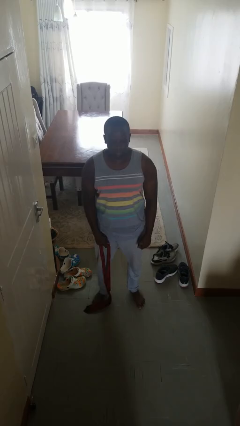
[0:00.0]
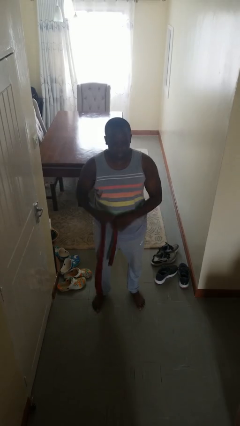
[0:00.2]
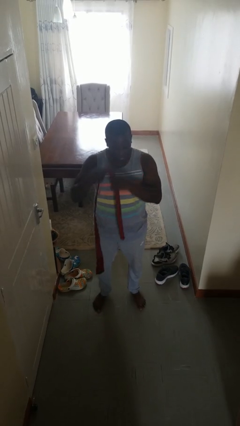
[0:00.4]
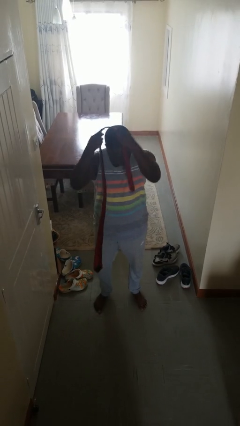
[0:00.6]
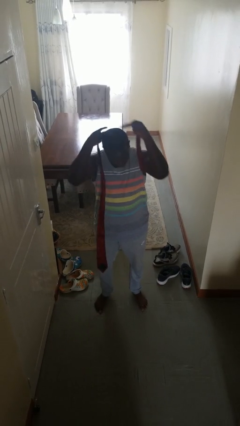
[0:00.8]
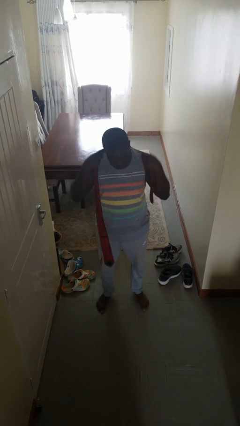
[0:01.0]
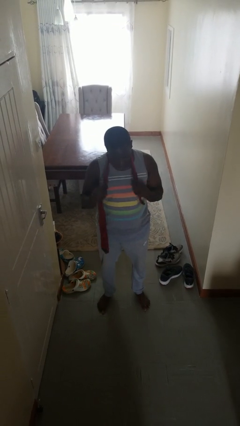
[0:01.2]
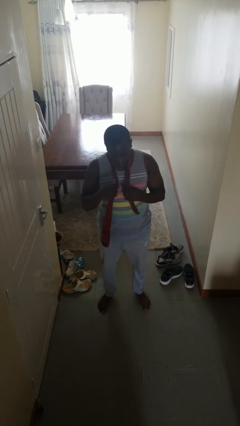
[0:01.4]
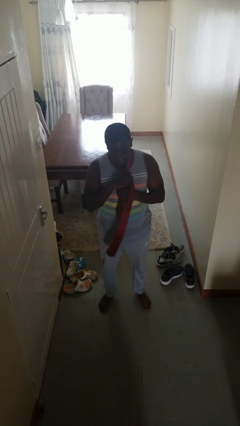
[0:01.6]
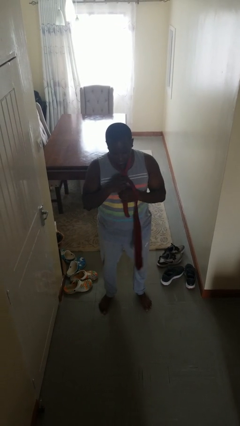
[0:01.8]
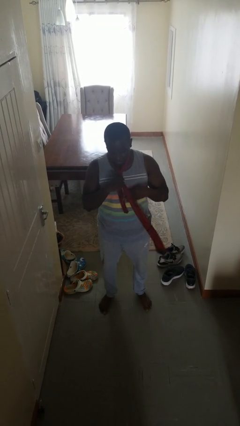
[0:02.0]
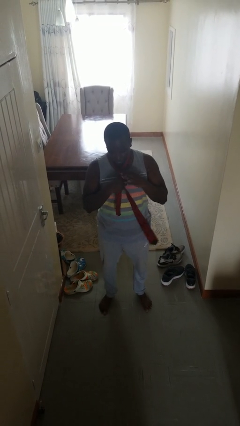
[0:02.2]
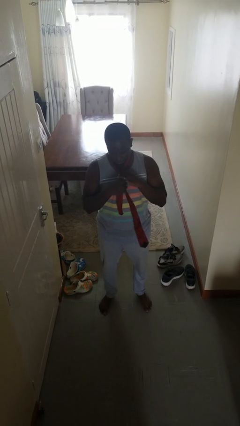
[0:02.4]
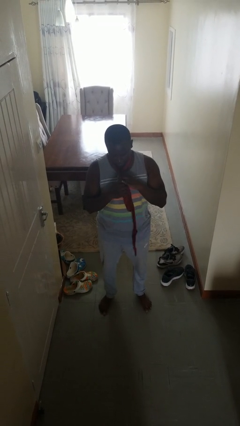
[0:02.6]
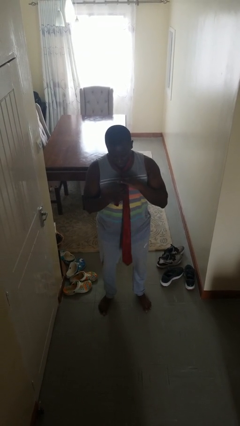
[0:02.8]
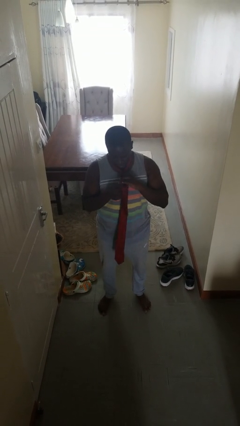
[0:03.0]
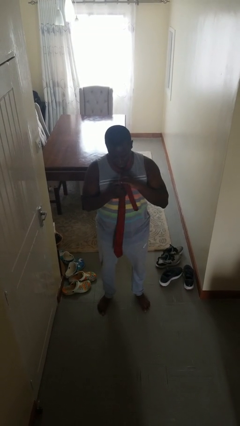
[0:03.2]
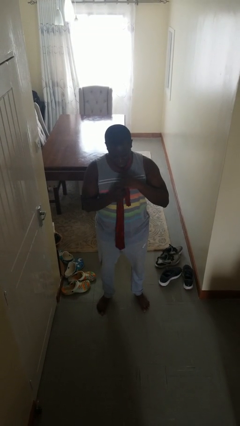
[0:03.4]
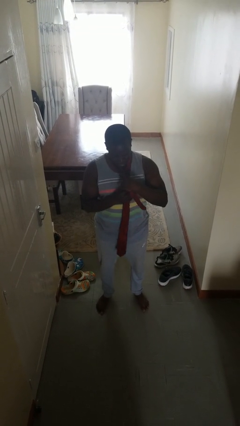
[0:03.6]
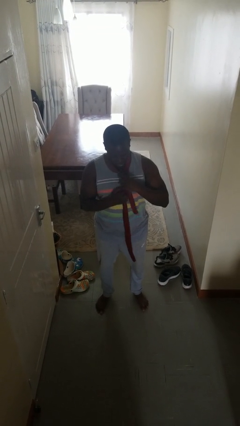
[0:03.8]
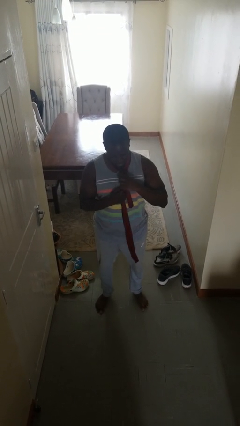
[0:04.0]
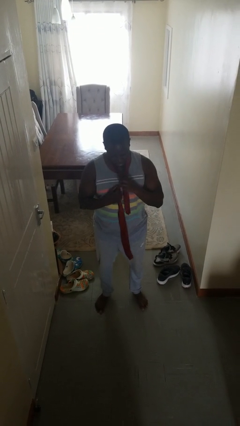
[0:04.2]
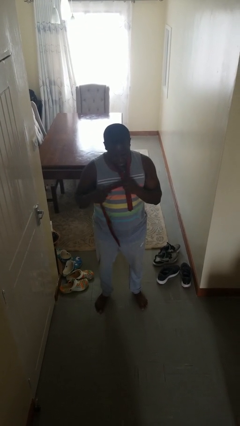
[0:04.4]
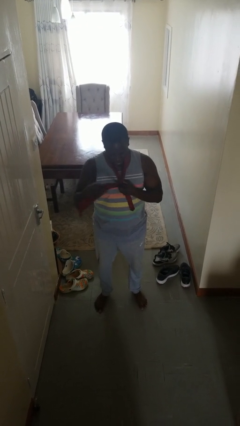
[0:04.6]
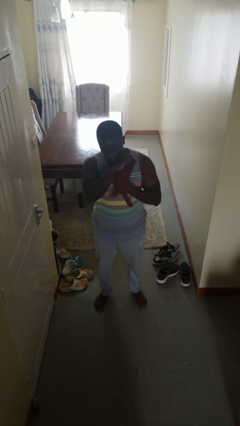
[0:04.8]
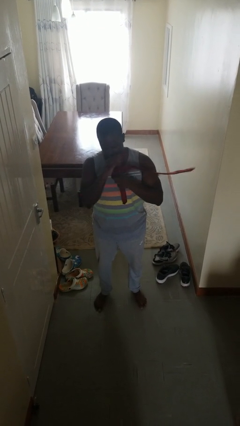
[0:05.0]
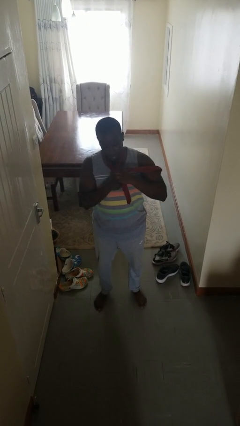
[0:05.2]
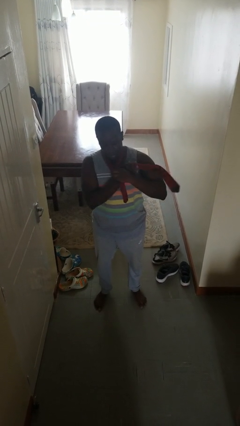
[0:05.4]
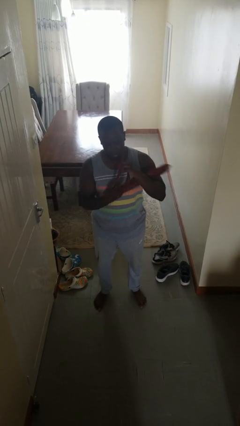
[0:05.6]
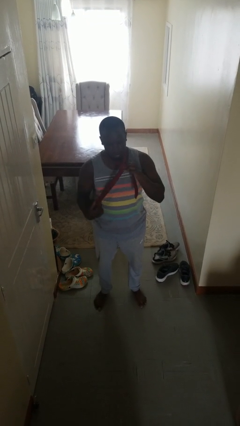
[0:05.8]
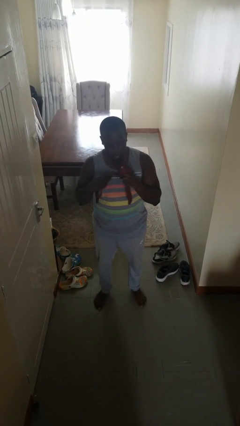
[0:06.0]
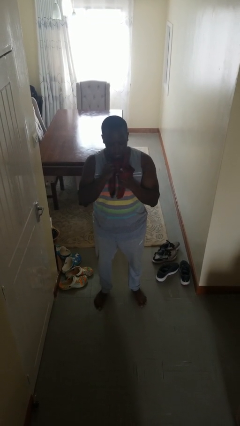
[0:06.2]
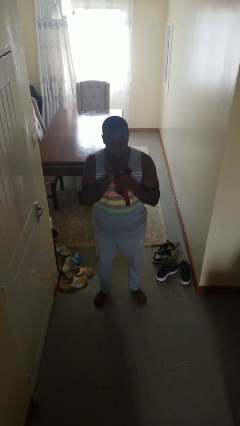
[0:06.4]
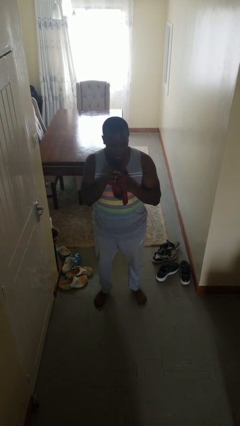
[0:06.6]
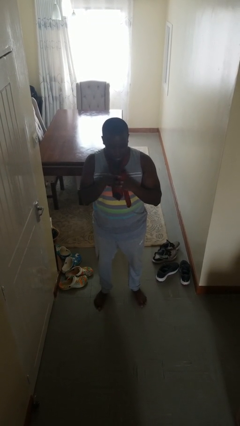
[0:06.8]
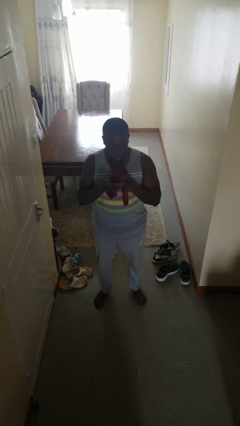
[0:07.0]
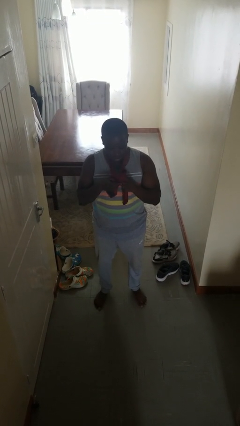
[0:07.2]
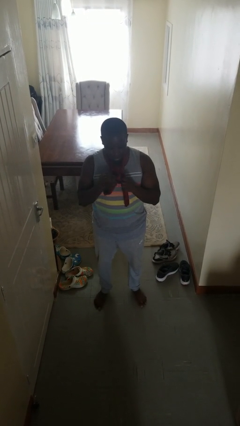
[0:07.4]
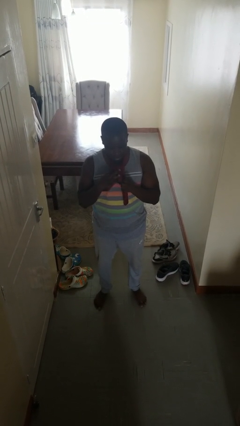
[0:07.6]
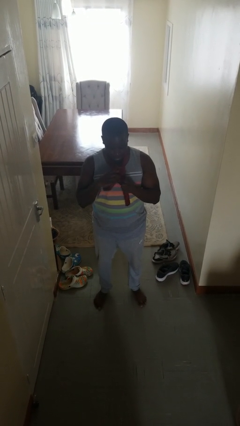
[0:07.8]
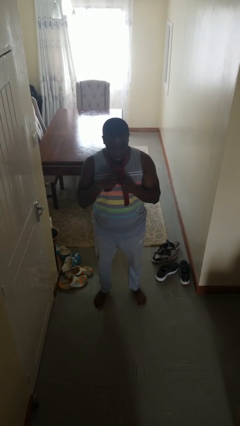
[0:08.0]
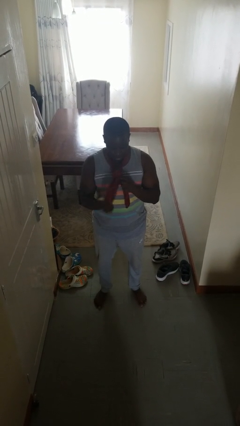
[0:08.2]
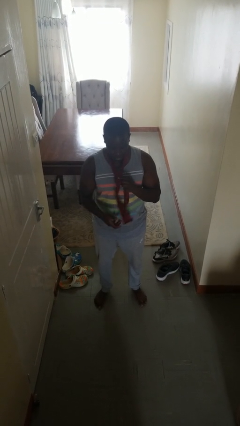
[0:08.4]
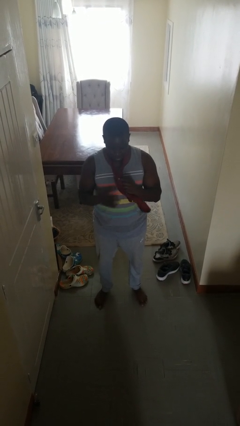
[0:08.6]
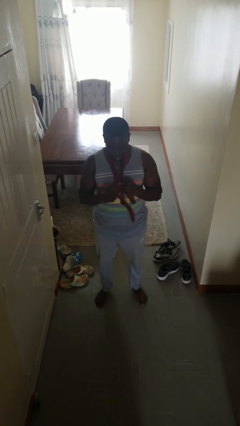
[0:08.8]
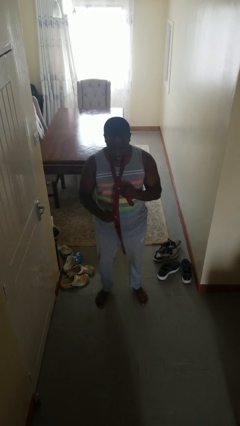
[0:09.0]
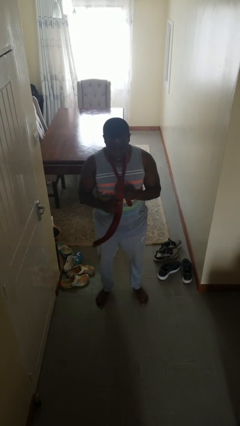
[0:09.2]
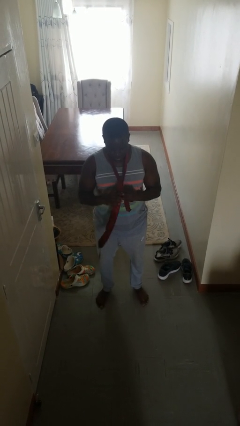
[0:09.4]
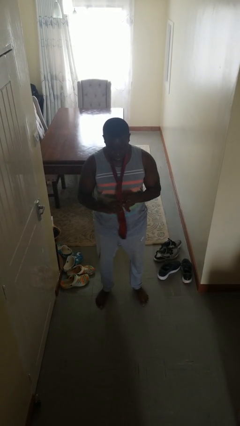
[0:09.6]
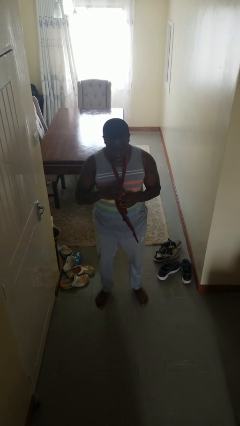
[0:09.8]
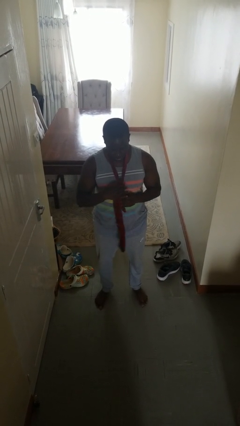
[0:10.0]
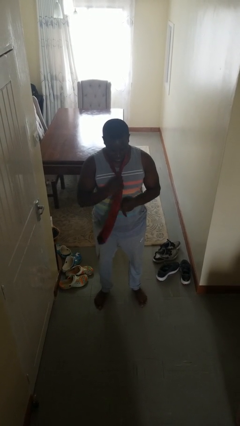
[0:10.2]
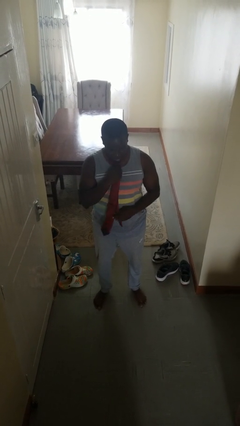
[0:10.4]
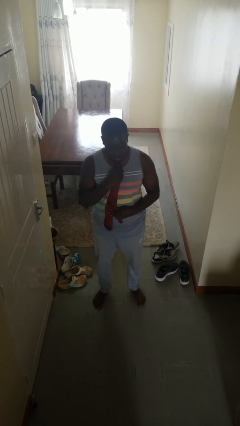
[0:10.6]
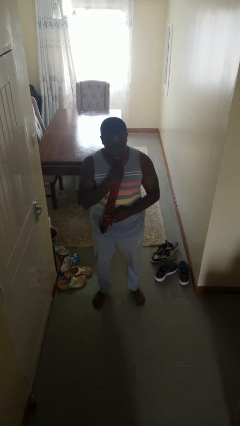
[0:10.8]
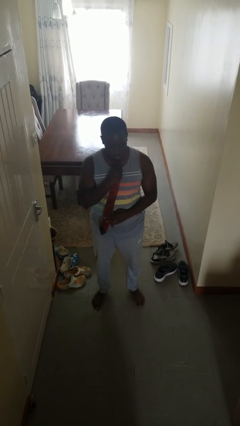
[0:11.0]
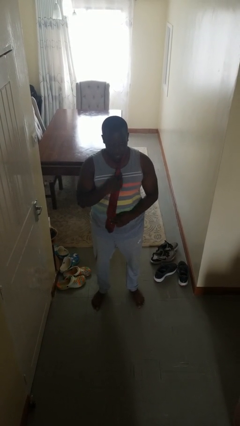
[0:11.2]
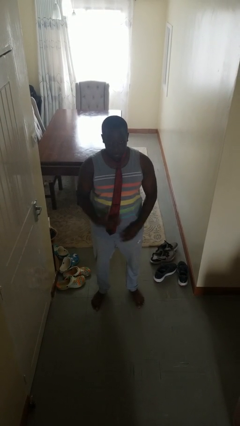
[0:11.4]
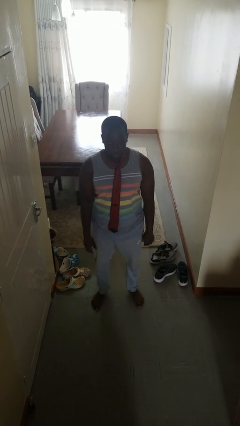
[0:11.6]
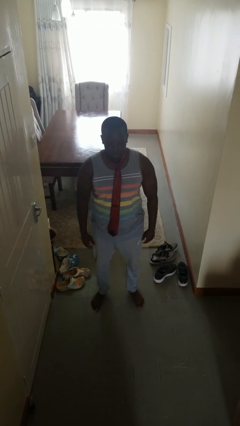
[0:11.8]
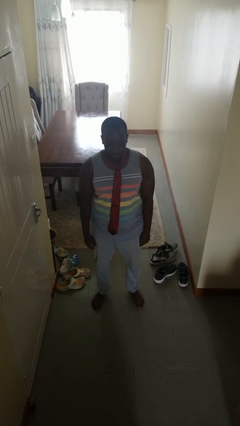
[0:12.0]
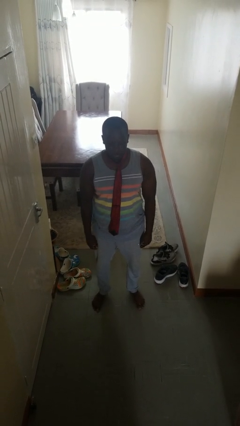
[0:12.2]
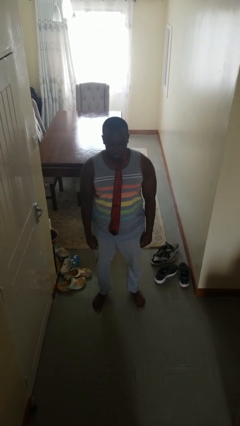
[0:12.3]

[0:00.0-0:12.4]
person puts on necktie

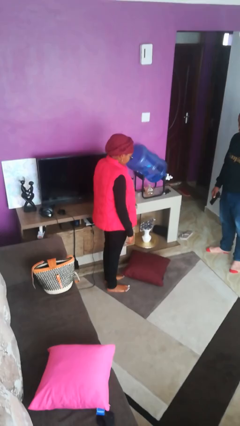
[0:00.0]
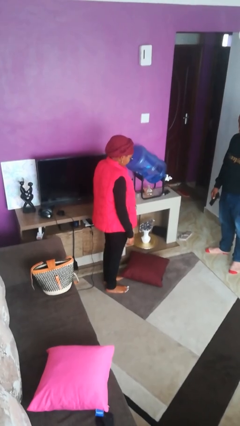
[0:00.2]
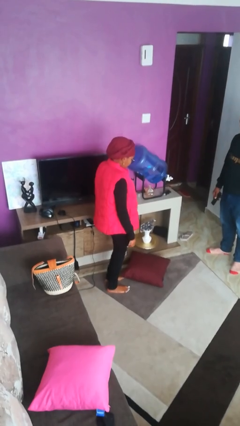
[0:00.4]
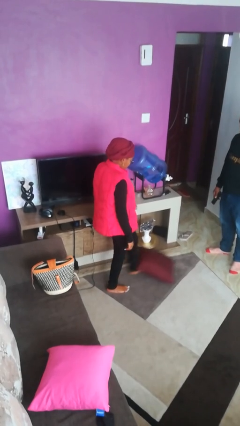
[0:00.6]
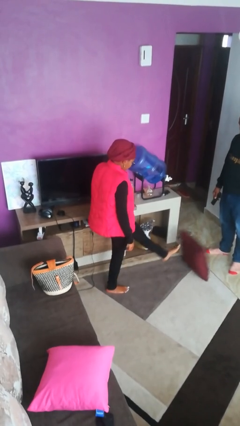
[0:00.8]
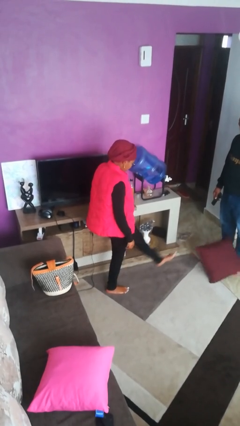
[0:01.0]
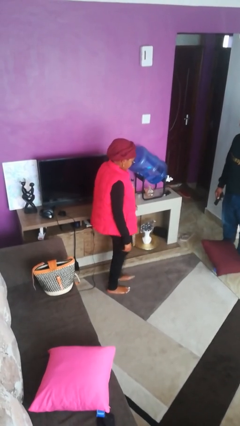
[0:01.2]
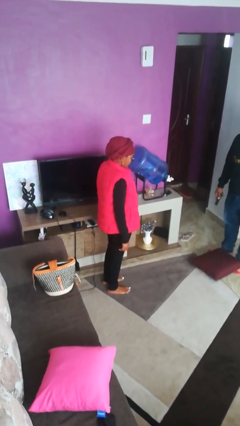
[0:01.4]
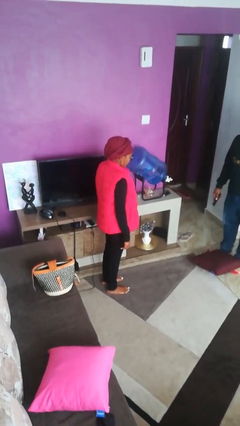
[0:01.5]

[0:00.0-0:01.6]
person kicks object to person

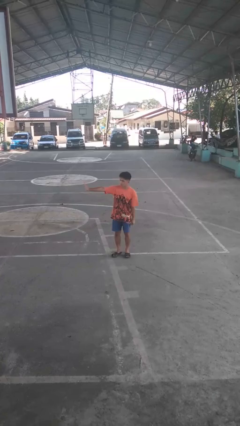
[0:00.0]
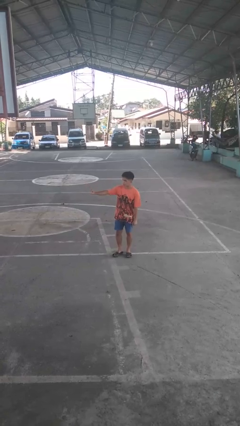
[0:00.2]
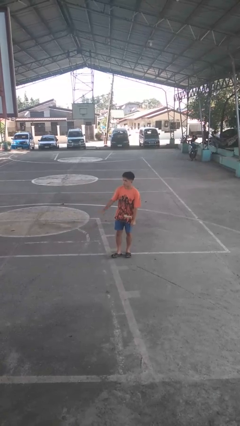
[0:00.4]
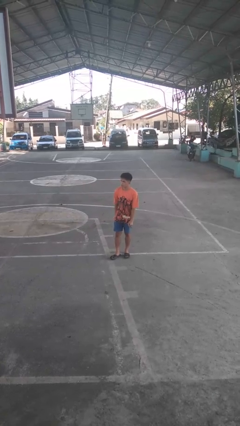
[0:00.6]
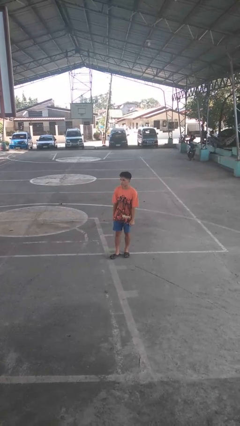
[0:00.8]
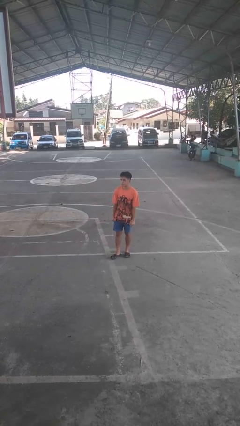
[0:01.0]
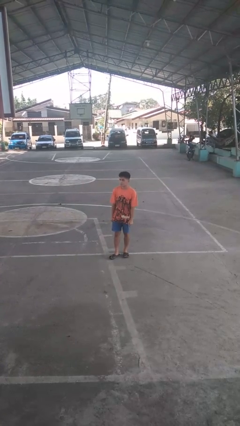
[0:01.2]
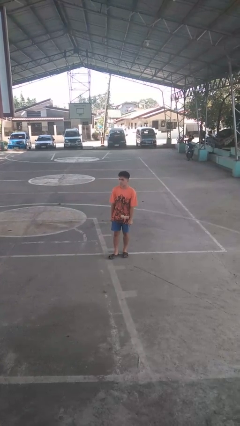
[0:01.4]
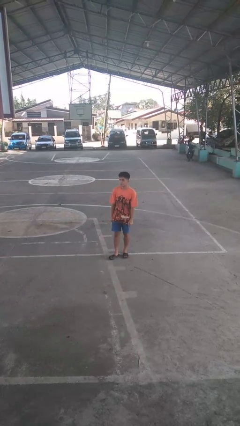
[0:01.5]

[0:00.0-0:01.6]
person gestures swipe right

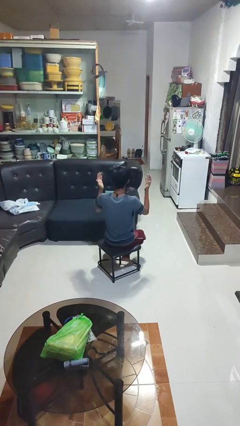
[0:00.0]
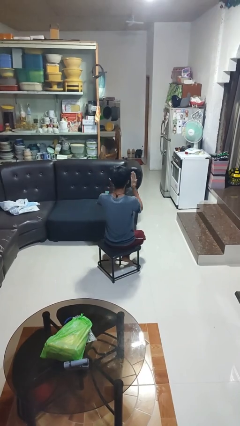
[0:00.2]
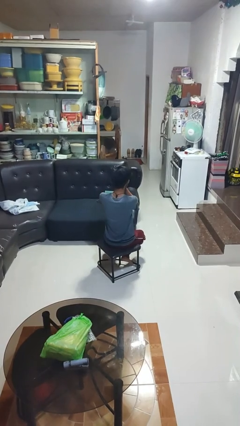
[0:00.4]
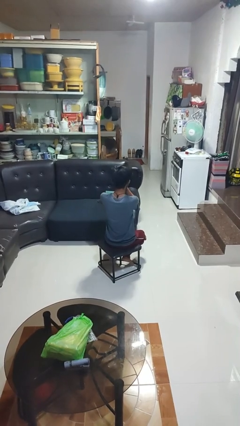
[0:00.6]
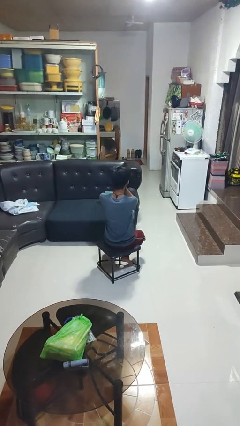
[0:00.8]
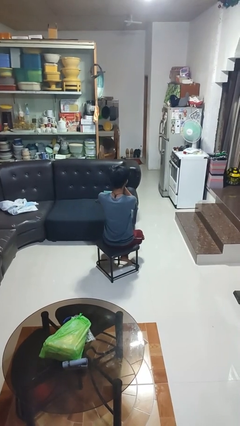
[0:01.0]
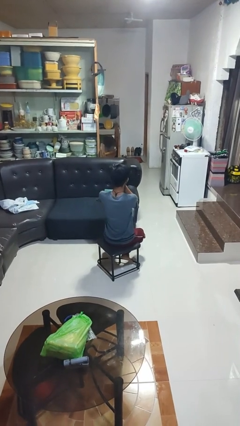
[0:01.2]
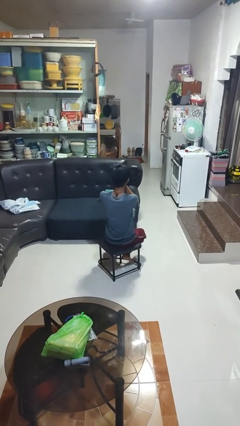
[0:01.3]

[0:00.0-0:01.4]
person covers face with hands

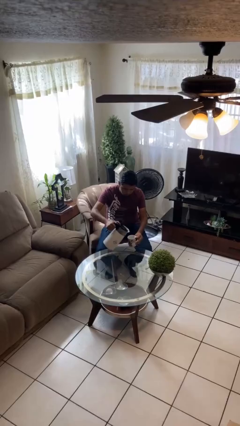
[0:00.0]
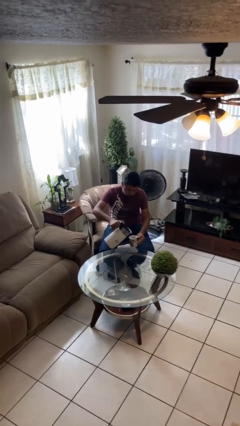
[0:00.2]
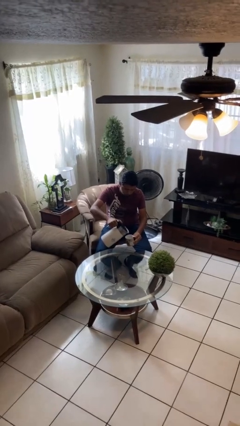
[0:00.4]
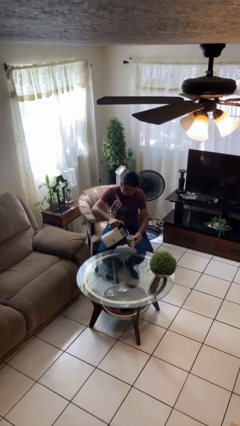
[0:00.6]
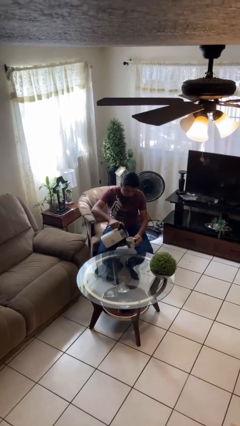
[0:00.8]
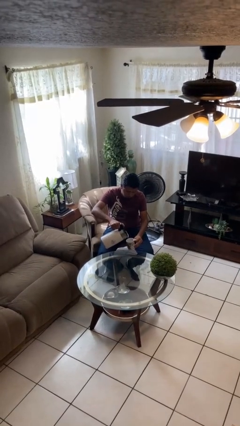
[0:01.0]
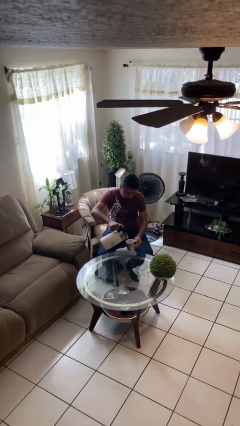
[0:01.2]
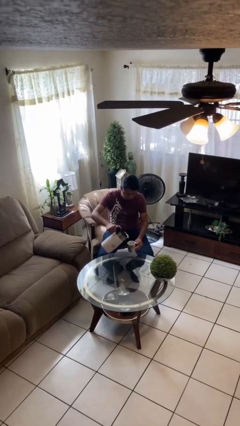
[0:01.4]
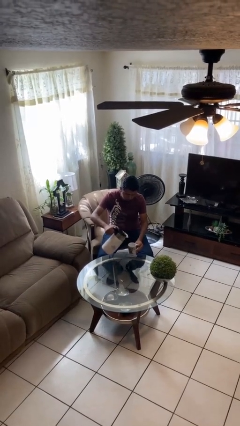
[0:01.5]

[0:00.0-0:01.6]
person pours coffee into mug
